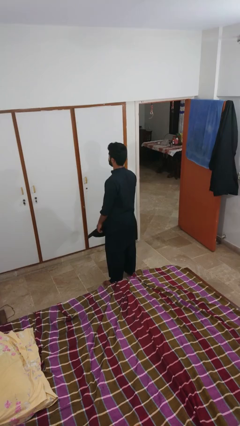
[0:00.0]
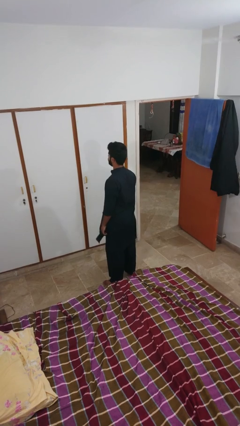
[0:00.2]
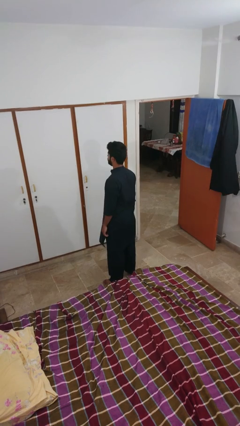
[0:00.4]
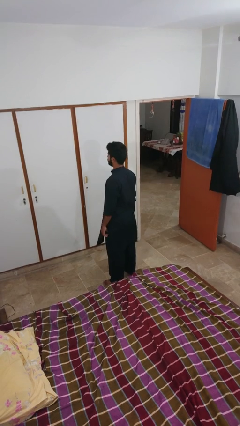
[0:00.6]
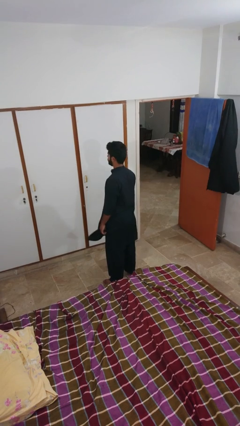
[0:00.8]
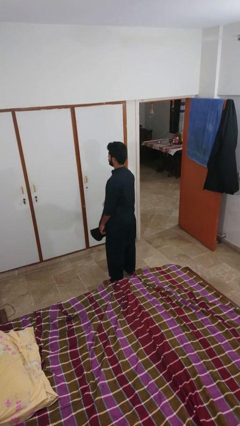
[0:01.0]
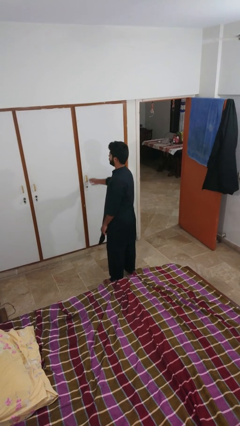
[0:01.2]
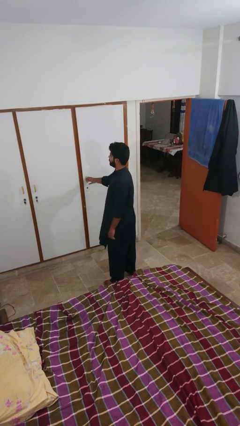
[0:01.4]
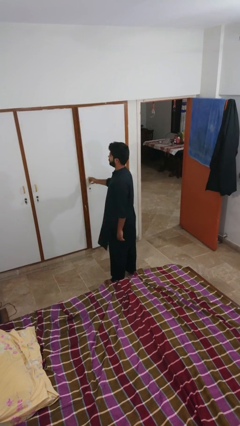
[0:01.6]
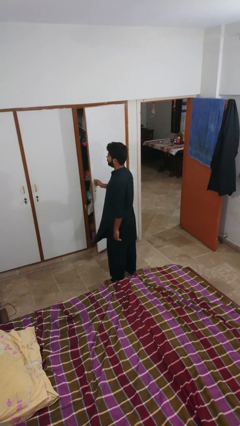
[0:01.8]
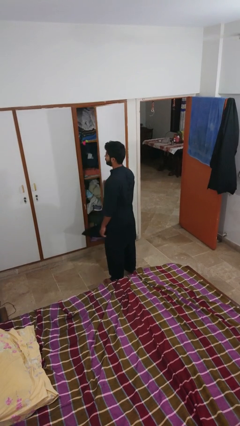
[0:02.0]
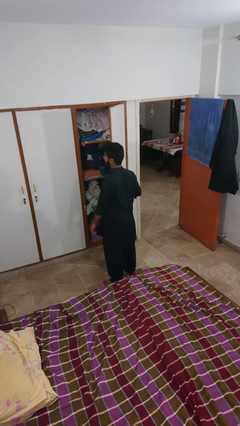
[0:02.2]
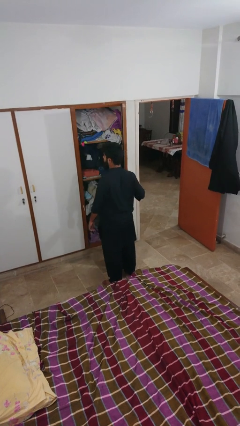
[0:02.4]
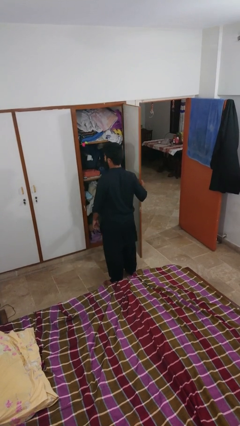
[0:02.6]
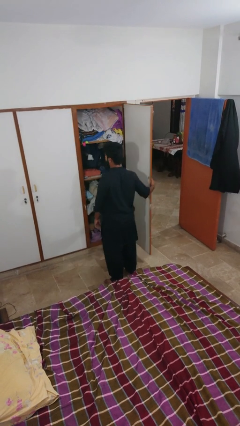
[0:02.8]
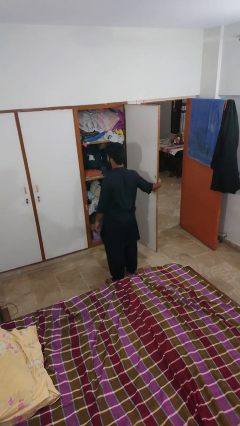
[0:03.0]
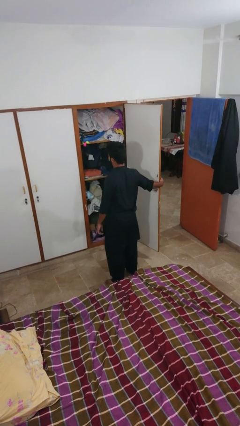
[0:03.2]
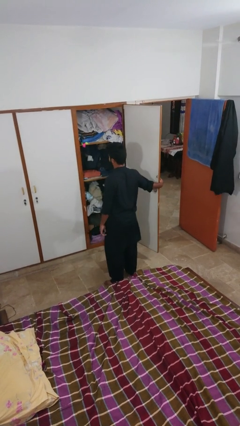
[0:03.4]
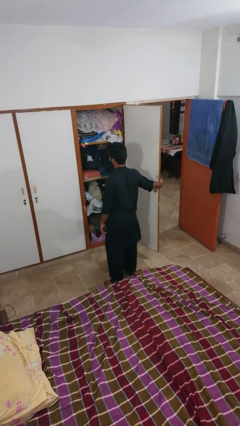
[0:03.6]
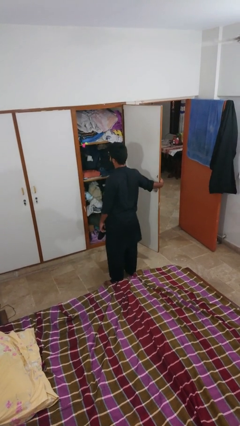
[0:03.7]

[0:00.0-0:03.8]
person opens closet door

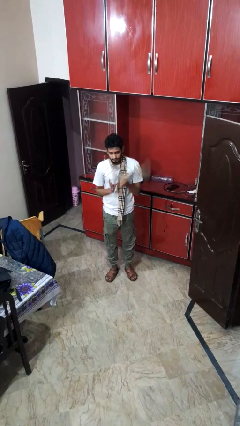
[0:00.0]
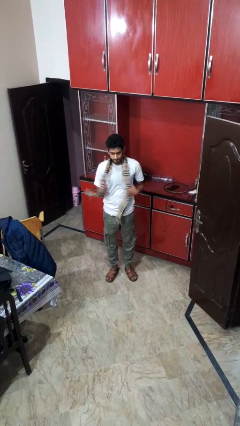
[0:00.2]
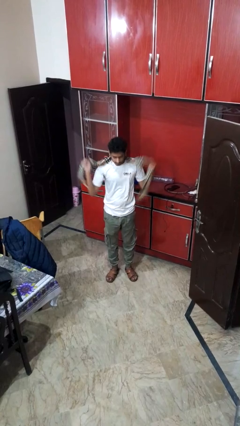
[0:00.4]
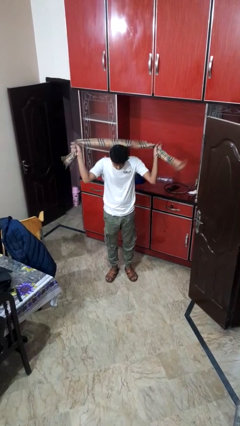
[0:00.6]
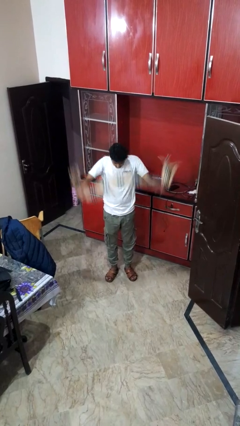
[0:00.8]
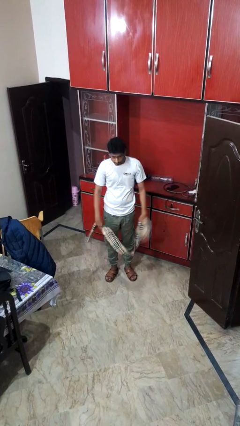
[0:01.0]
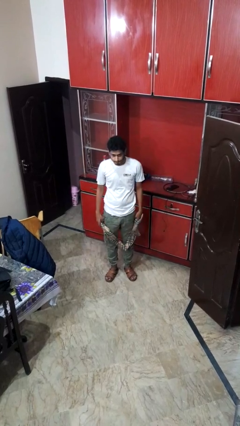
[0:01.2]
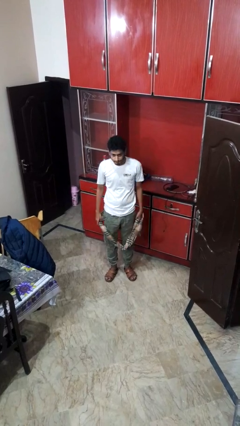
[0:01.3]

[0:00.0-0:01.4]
person takes off scarf

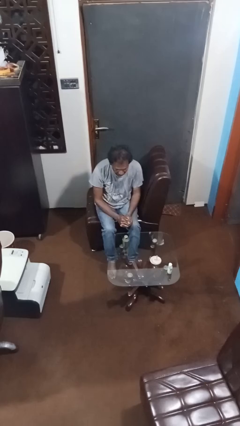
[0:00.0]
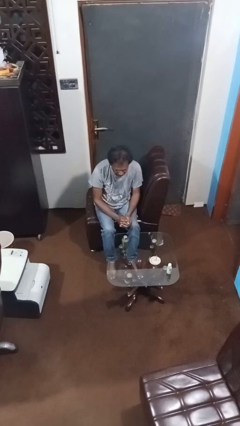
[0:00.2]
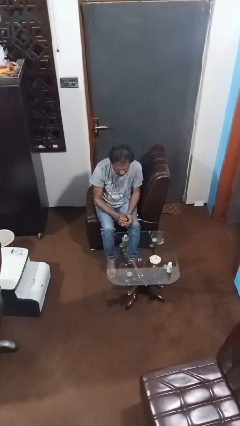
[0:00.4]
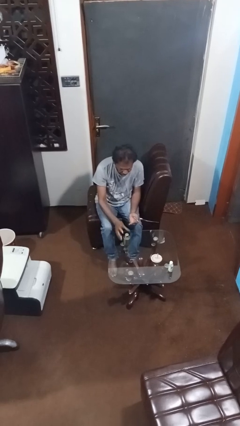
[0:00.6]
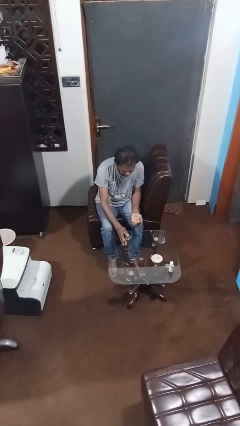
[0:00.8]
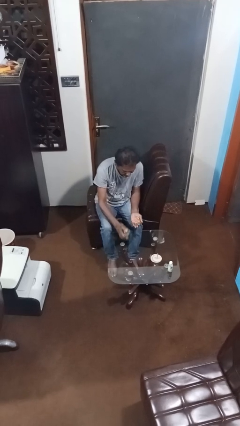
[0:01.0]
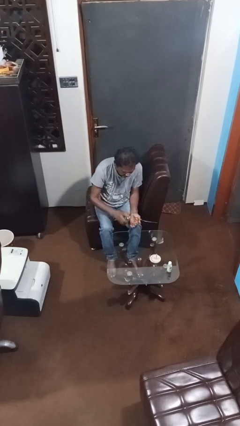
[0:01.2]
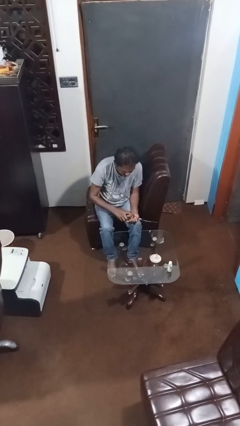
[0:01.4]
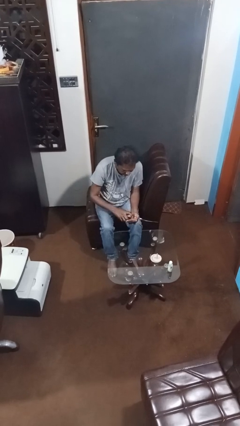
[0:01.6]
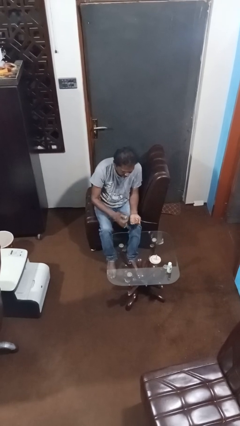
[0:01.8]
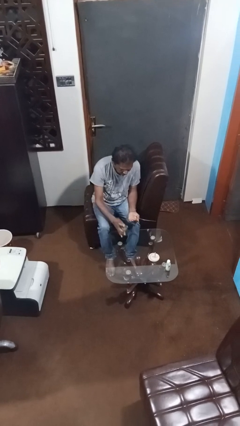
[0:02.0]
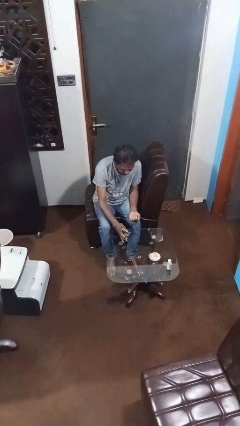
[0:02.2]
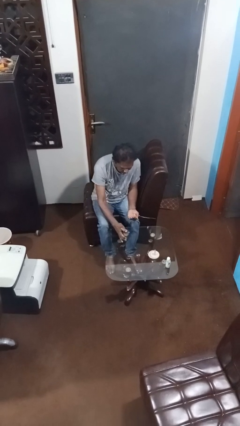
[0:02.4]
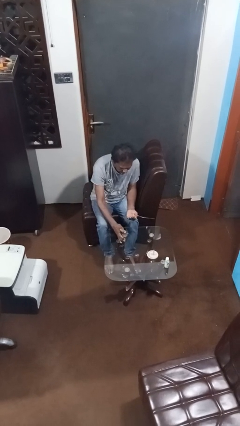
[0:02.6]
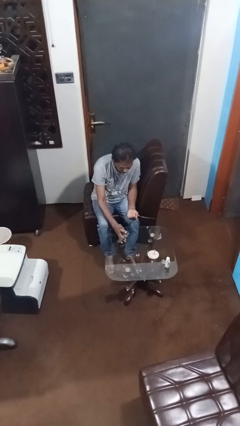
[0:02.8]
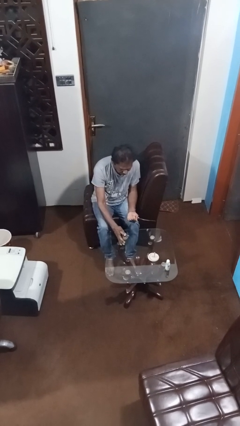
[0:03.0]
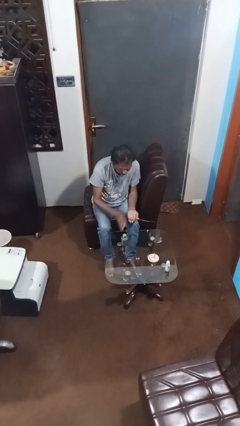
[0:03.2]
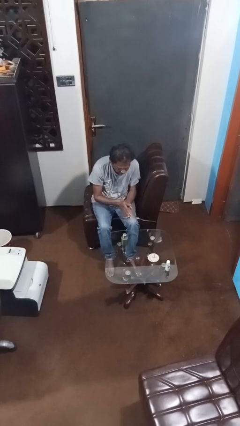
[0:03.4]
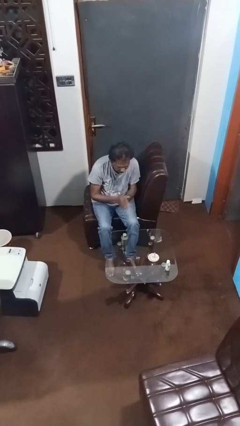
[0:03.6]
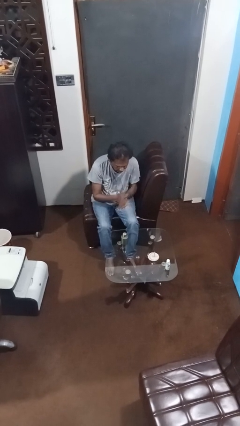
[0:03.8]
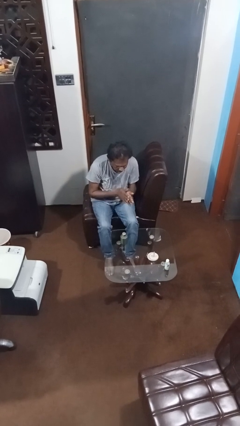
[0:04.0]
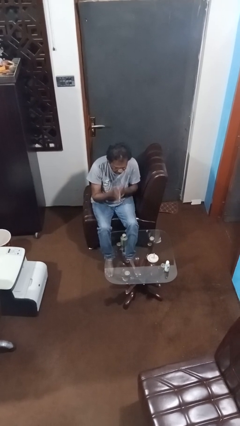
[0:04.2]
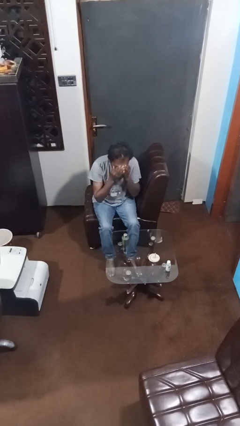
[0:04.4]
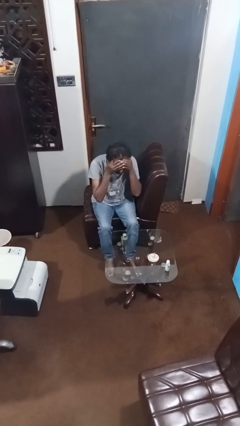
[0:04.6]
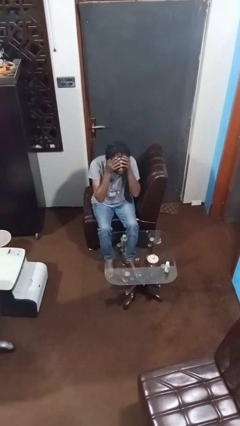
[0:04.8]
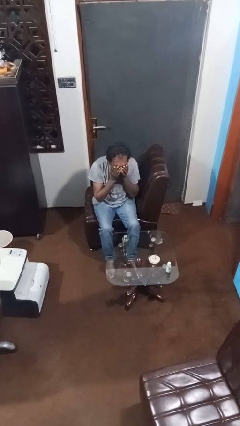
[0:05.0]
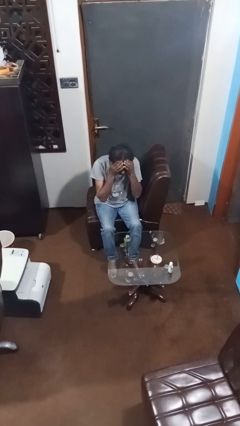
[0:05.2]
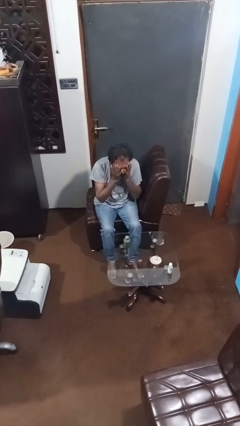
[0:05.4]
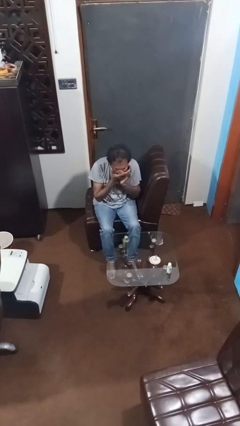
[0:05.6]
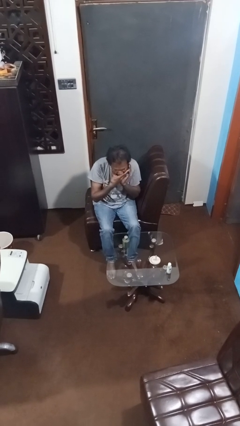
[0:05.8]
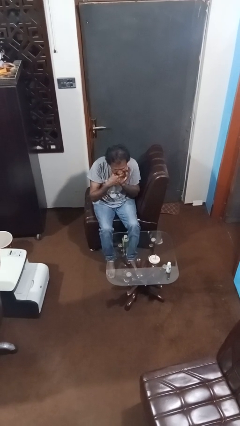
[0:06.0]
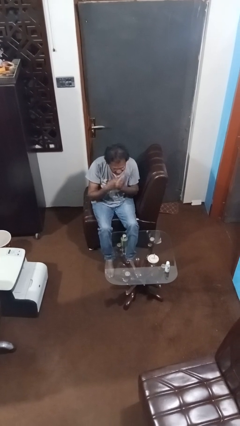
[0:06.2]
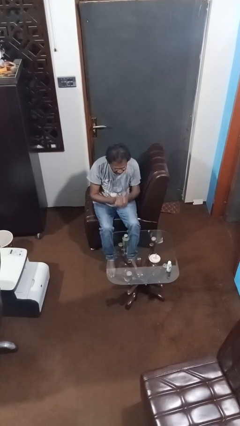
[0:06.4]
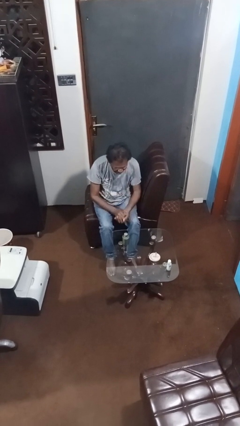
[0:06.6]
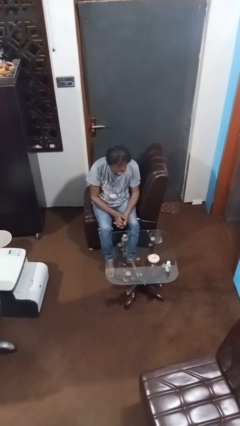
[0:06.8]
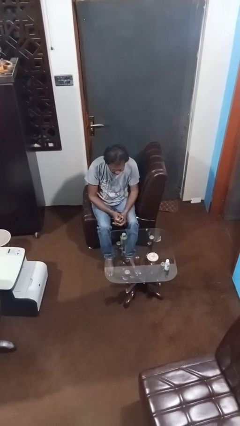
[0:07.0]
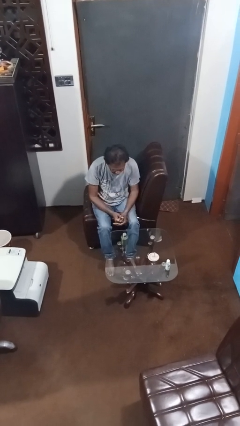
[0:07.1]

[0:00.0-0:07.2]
person applies facial moisturizer

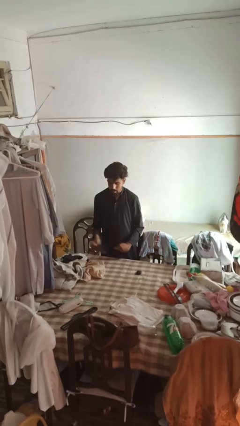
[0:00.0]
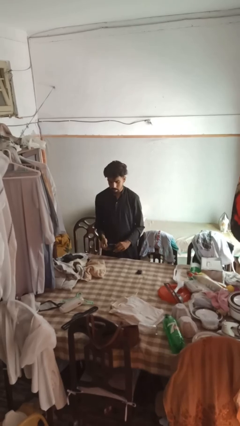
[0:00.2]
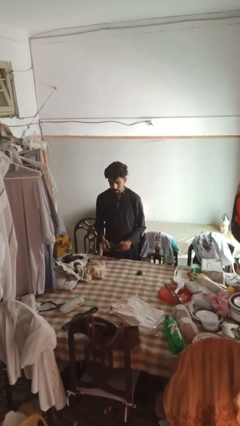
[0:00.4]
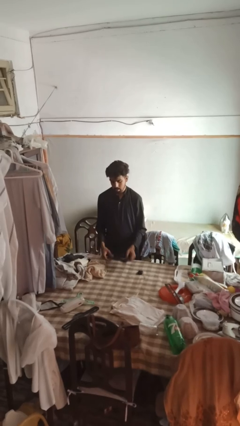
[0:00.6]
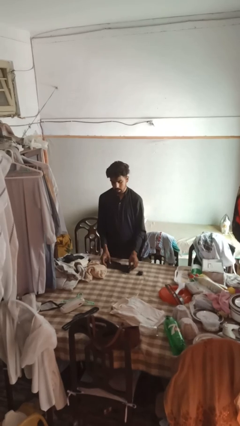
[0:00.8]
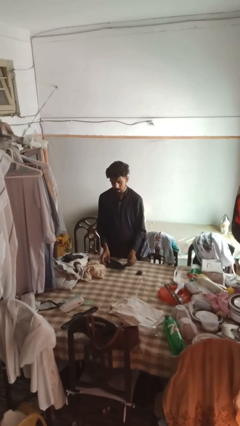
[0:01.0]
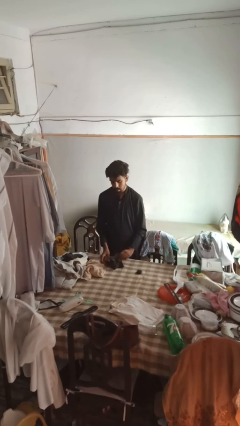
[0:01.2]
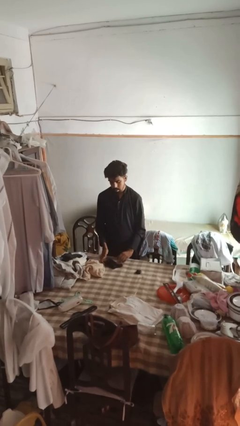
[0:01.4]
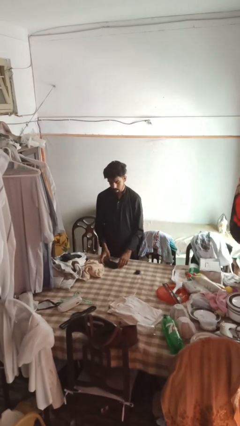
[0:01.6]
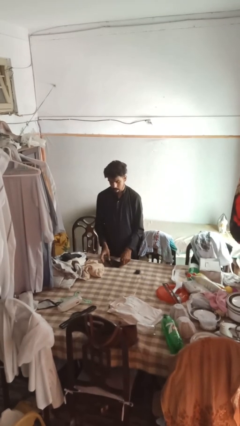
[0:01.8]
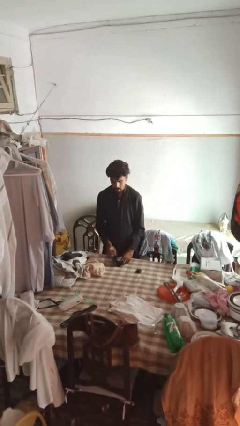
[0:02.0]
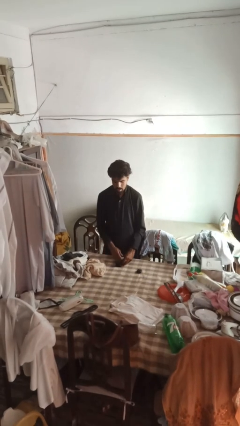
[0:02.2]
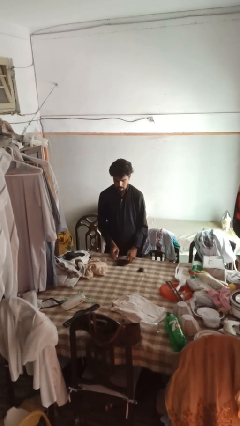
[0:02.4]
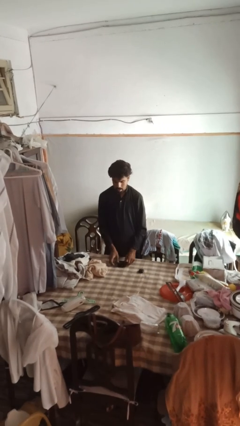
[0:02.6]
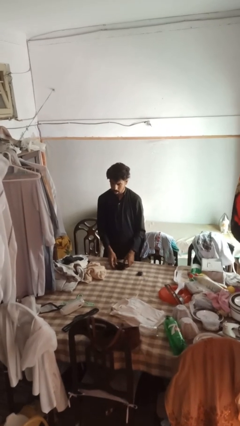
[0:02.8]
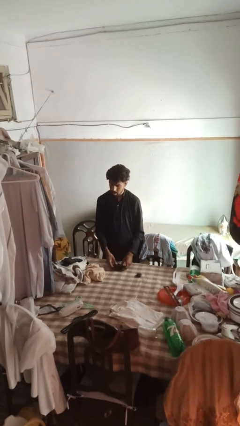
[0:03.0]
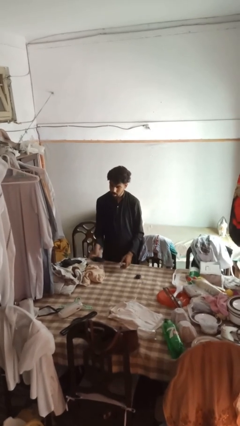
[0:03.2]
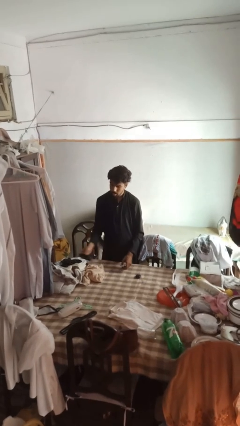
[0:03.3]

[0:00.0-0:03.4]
person folds socks

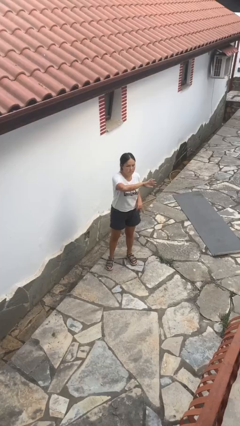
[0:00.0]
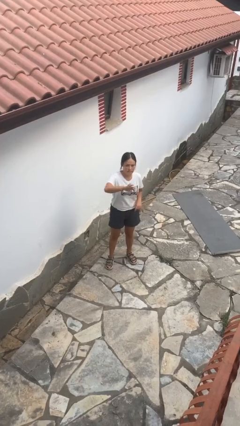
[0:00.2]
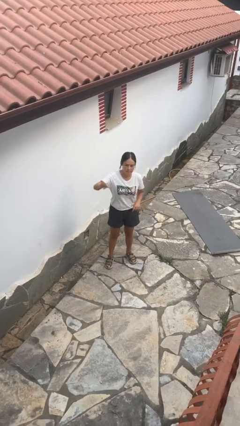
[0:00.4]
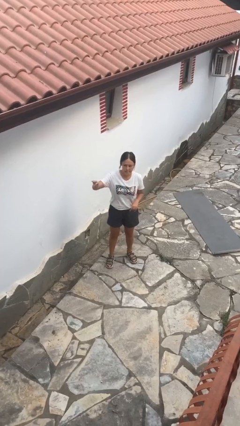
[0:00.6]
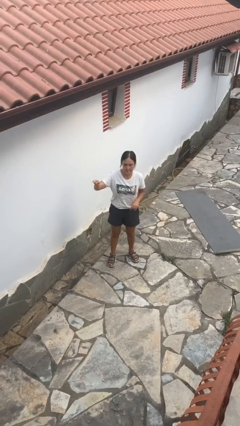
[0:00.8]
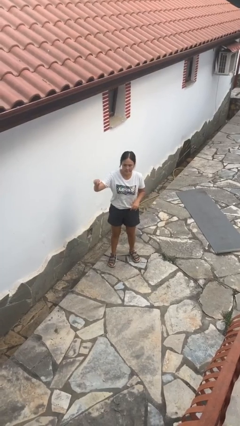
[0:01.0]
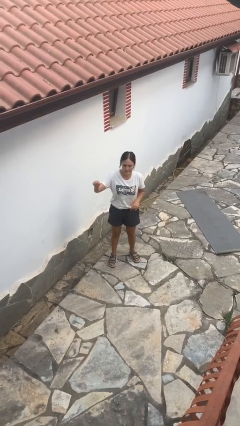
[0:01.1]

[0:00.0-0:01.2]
person gestures swipe right

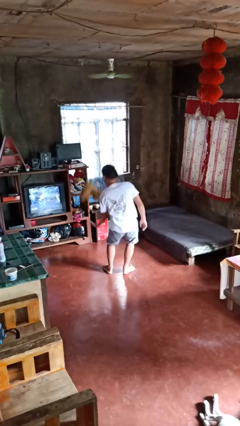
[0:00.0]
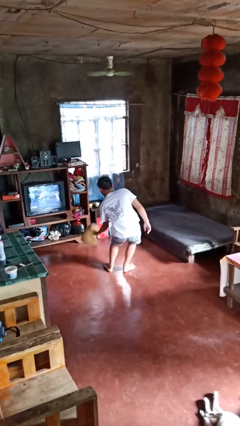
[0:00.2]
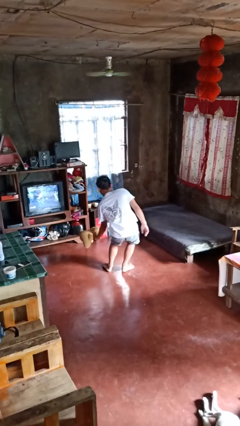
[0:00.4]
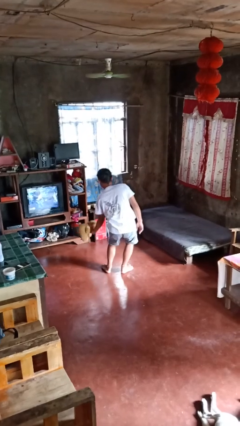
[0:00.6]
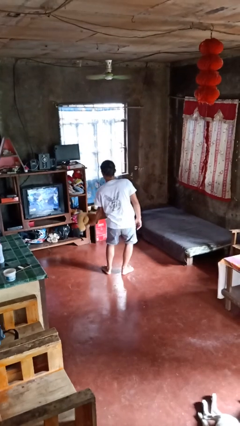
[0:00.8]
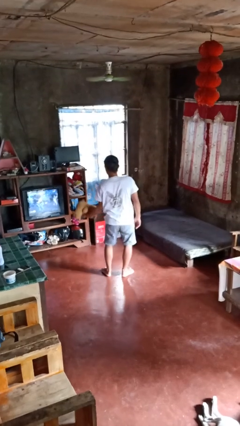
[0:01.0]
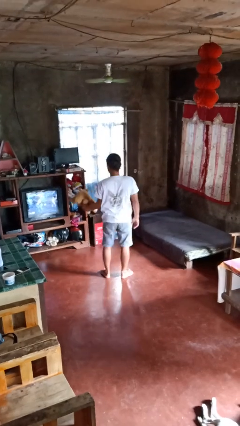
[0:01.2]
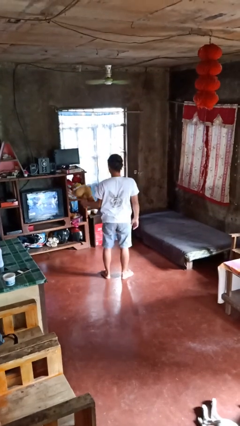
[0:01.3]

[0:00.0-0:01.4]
person catches dropped object
